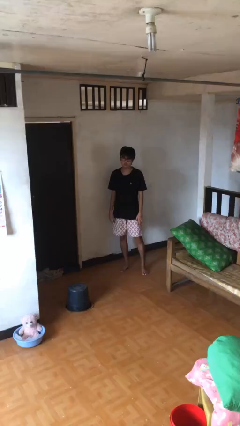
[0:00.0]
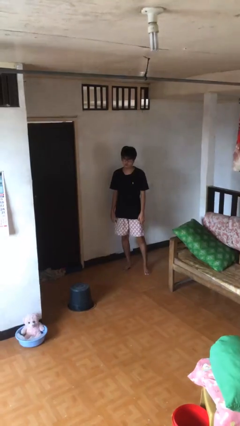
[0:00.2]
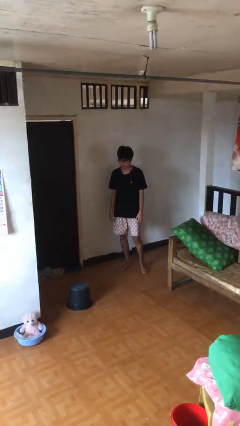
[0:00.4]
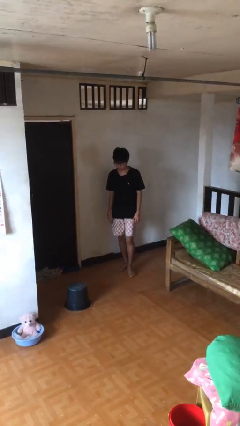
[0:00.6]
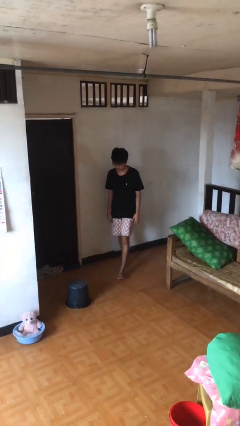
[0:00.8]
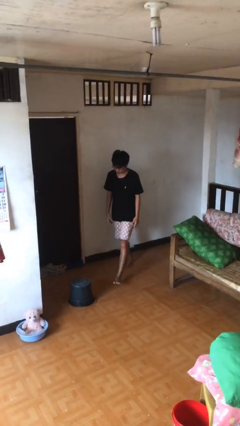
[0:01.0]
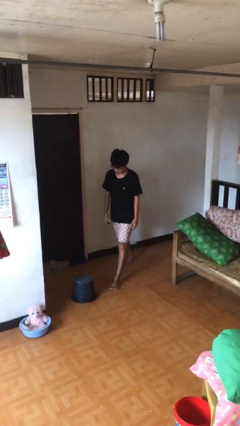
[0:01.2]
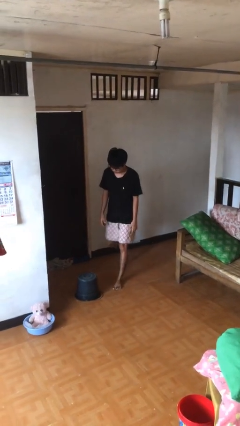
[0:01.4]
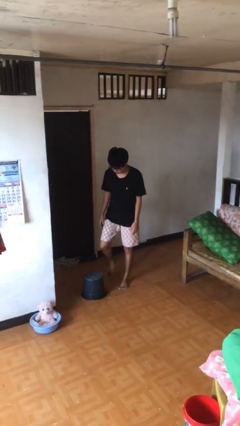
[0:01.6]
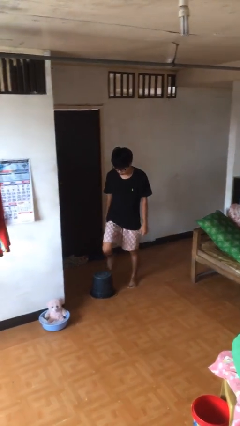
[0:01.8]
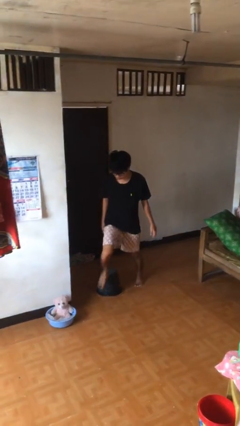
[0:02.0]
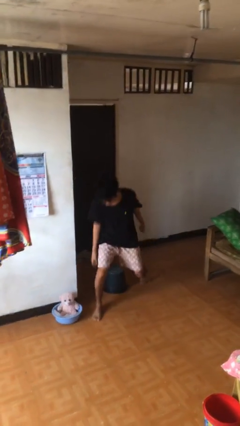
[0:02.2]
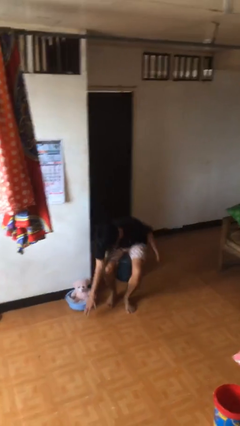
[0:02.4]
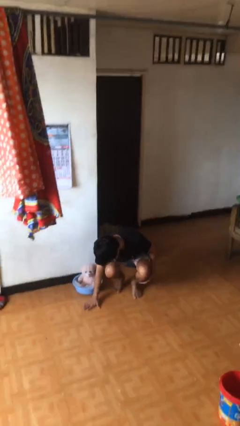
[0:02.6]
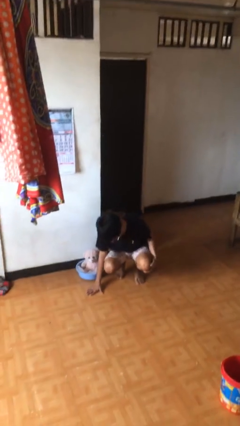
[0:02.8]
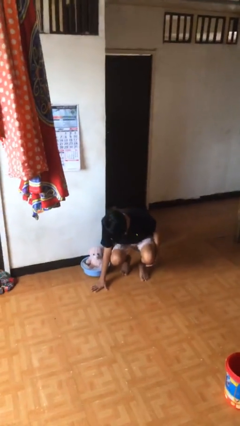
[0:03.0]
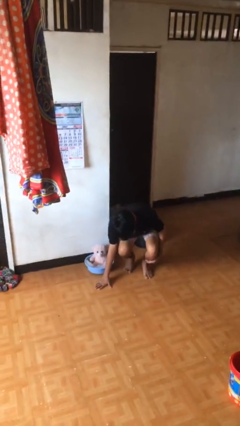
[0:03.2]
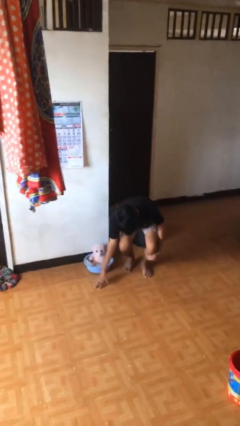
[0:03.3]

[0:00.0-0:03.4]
person trips on object on floor

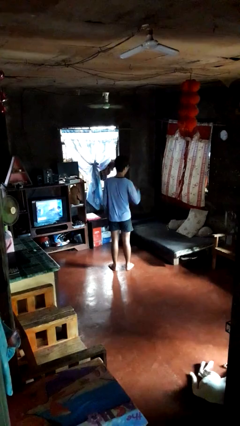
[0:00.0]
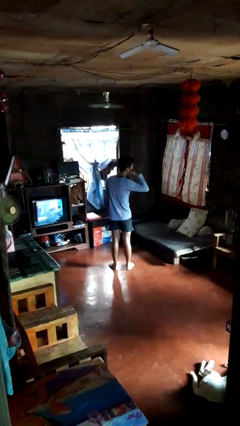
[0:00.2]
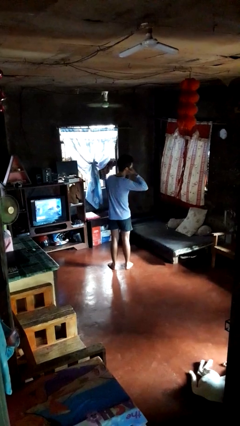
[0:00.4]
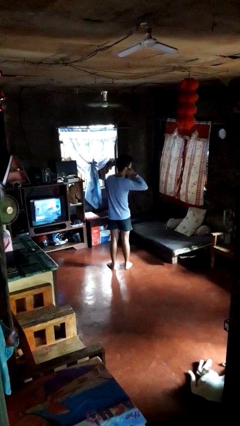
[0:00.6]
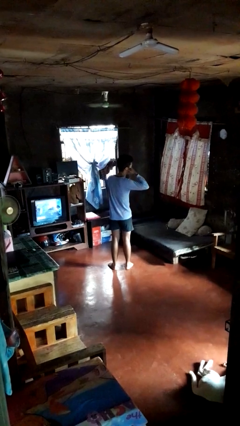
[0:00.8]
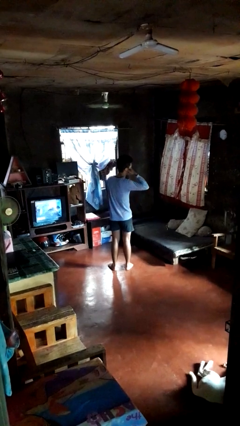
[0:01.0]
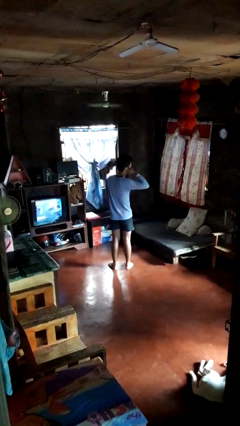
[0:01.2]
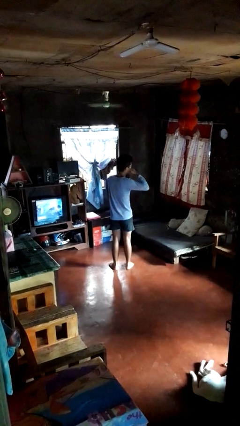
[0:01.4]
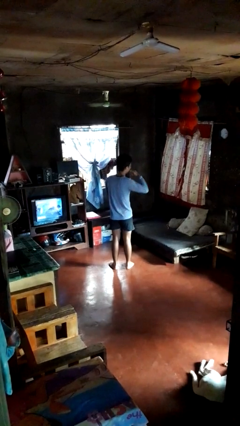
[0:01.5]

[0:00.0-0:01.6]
person gestures call me

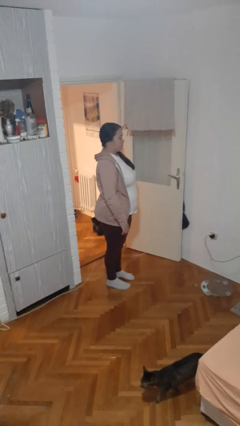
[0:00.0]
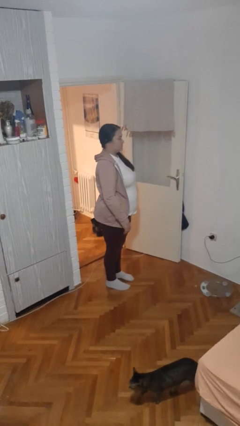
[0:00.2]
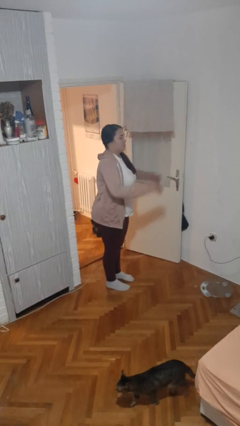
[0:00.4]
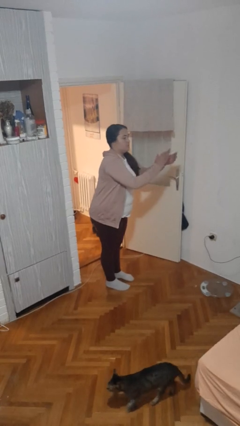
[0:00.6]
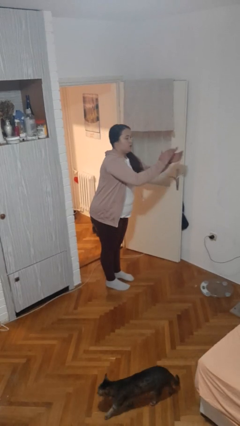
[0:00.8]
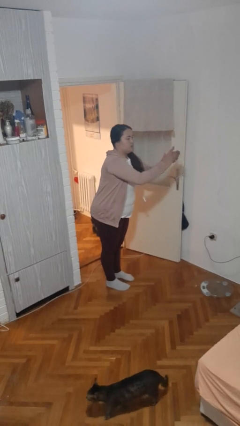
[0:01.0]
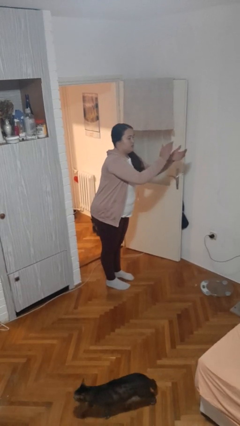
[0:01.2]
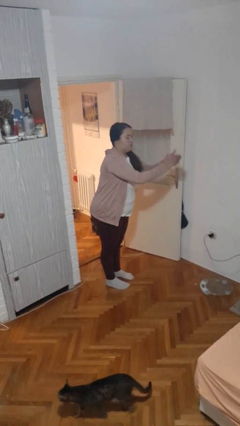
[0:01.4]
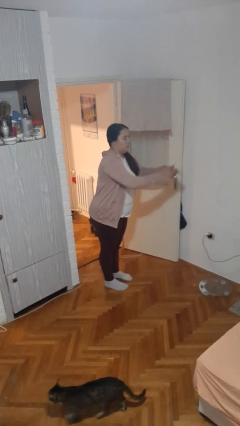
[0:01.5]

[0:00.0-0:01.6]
person claps hands

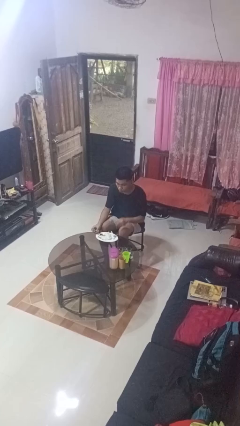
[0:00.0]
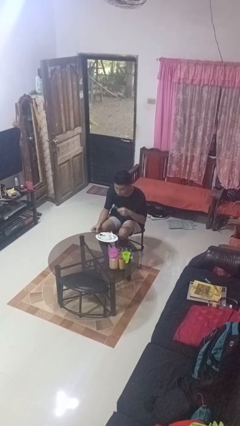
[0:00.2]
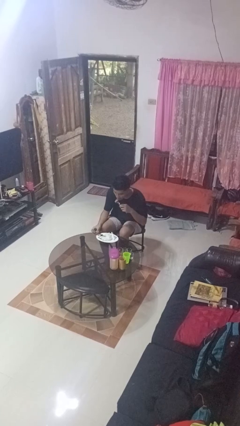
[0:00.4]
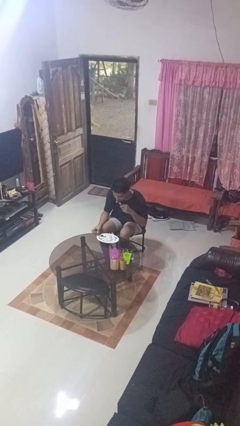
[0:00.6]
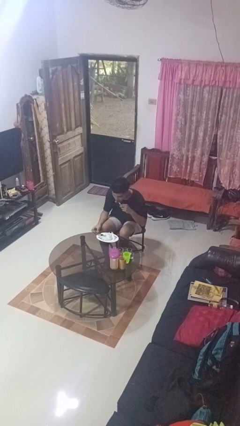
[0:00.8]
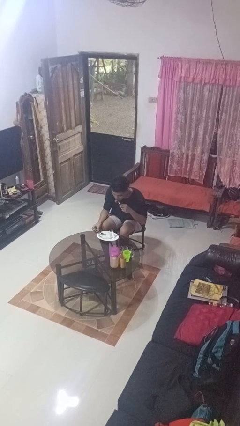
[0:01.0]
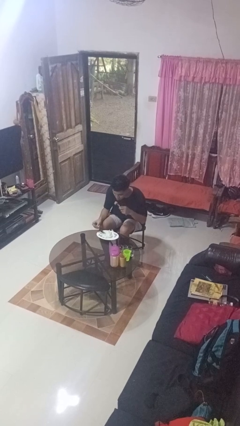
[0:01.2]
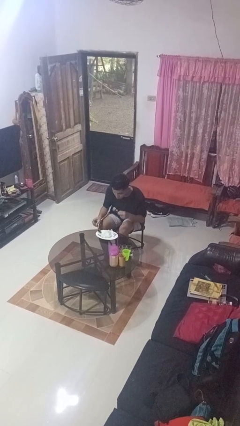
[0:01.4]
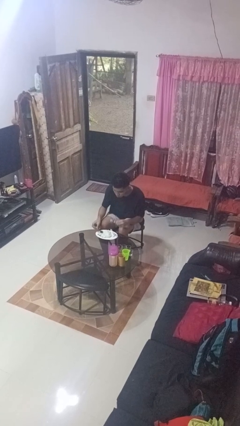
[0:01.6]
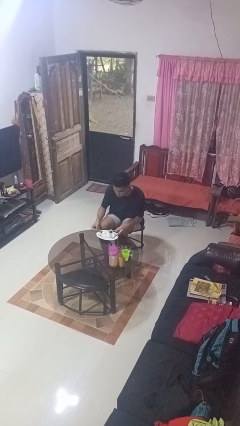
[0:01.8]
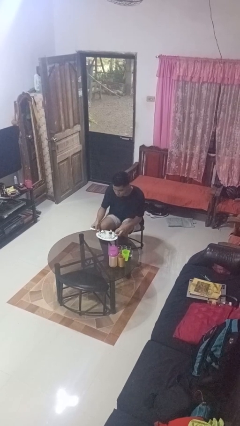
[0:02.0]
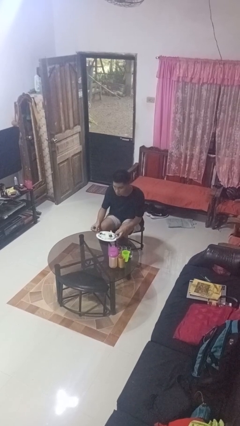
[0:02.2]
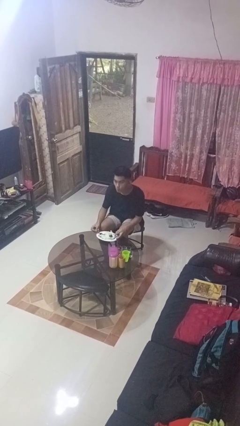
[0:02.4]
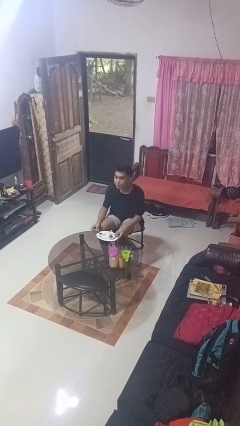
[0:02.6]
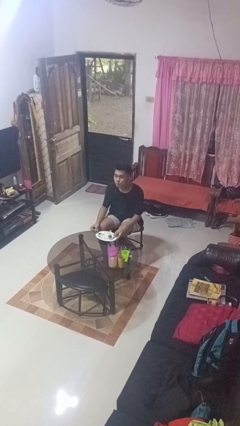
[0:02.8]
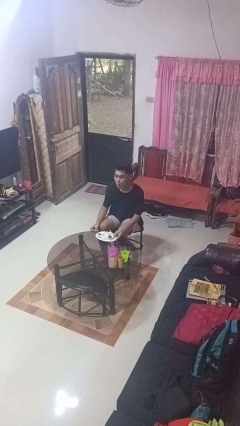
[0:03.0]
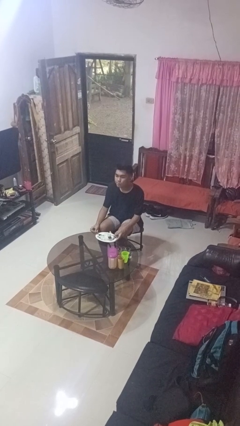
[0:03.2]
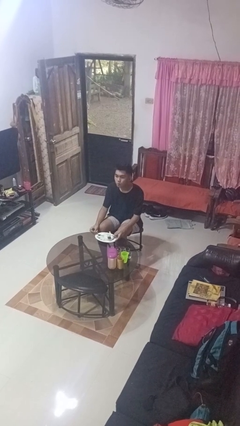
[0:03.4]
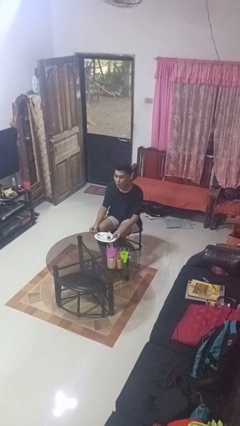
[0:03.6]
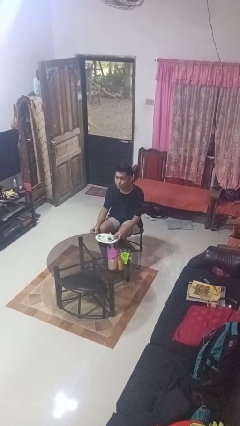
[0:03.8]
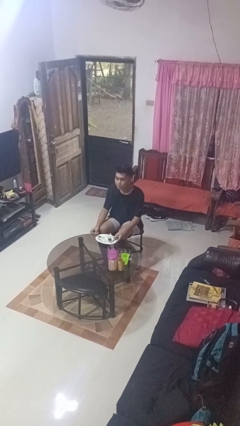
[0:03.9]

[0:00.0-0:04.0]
person eats with utensil

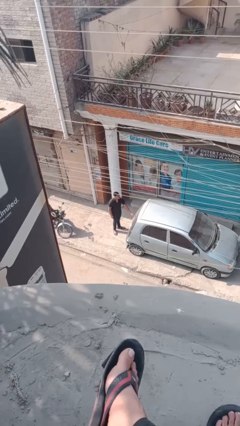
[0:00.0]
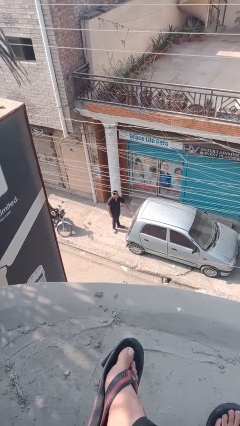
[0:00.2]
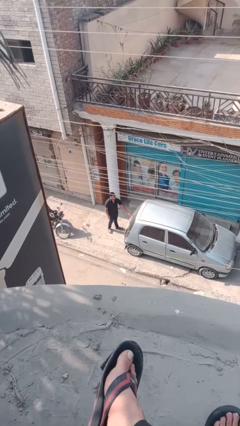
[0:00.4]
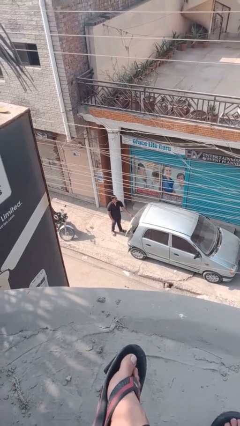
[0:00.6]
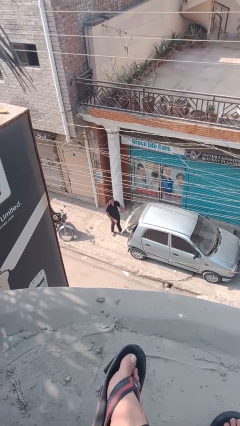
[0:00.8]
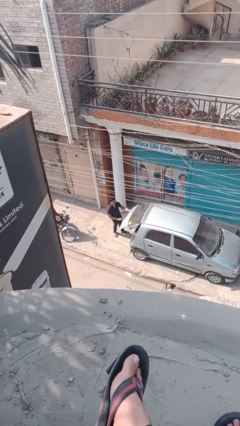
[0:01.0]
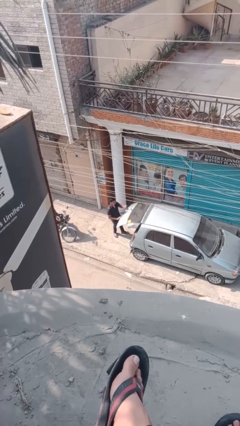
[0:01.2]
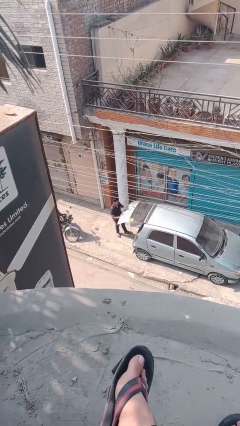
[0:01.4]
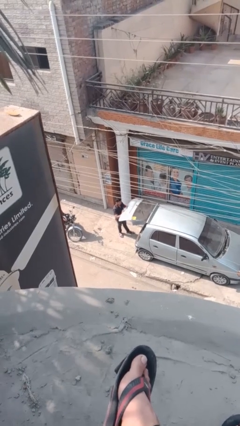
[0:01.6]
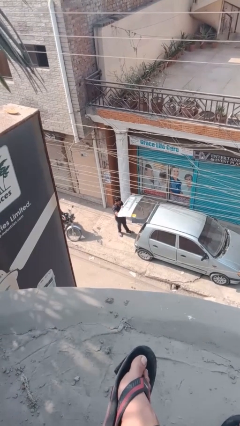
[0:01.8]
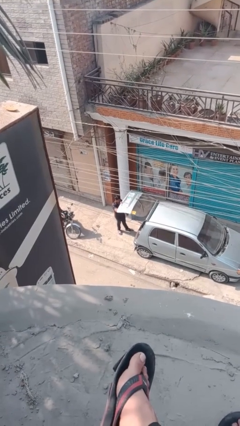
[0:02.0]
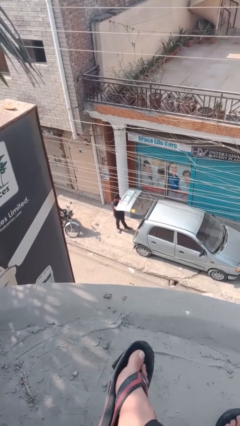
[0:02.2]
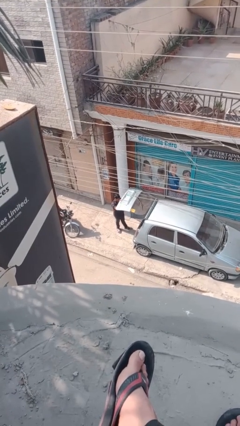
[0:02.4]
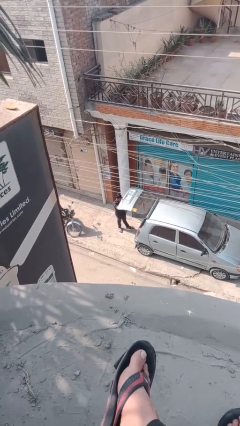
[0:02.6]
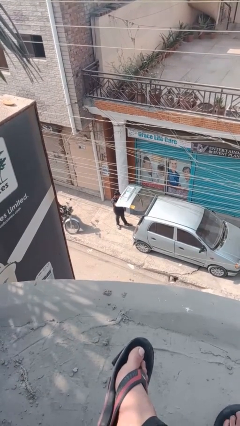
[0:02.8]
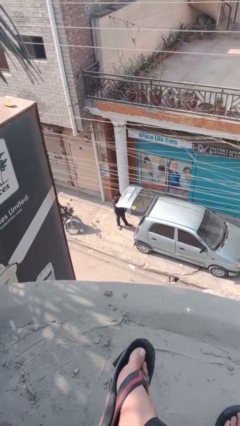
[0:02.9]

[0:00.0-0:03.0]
person opens car trunk

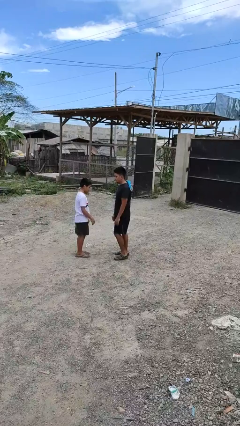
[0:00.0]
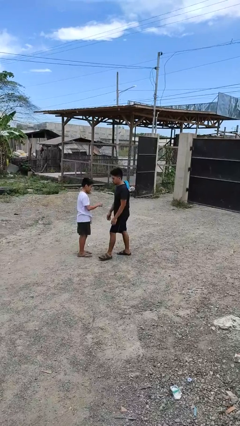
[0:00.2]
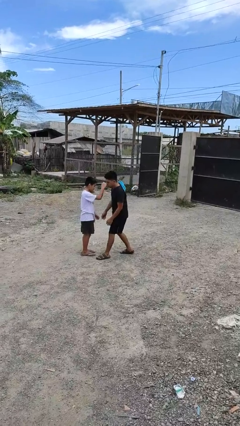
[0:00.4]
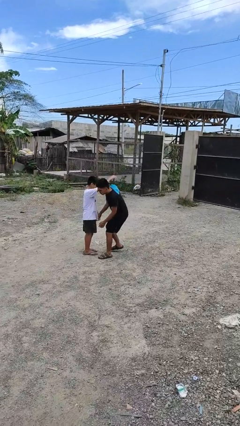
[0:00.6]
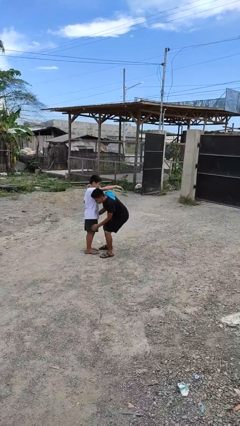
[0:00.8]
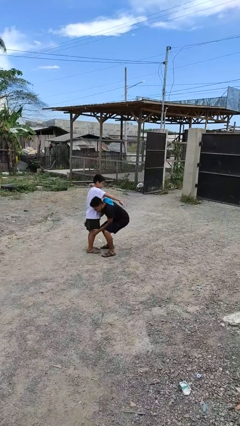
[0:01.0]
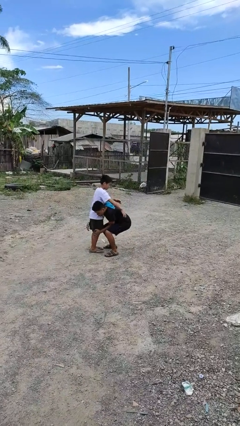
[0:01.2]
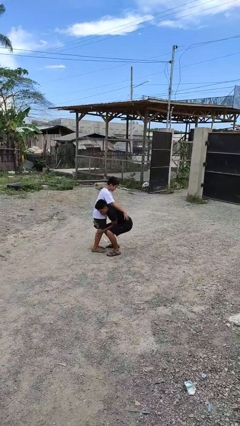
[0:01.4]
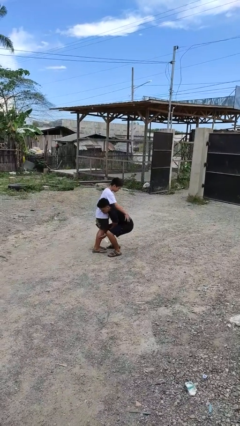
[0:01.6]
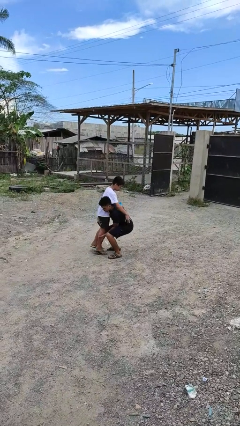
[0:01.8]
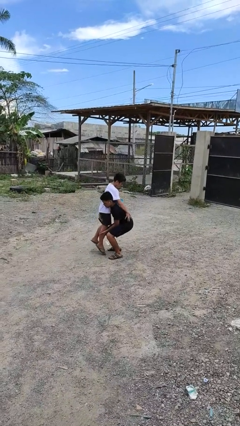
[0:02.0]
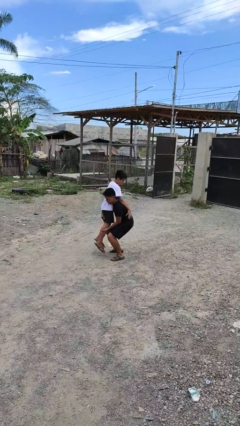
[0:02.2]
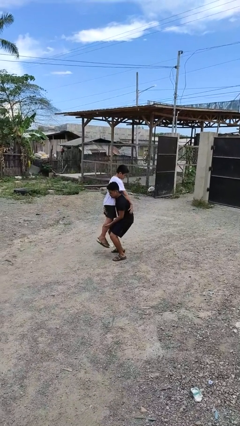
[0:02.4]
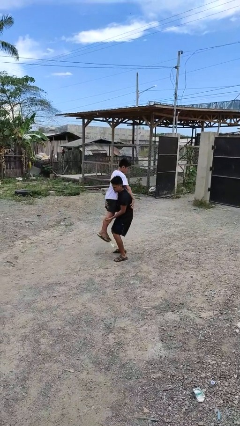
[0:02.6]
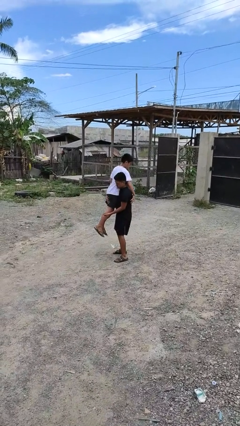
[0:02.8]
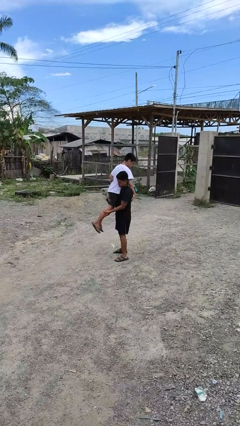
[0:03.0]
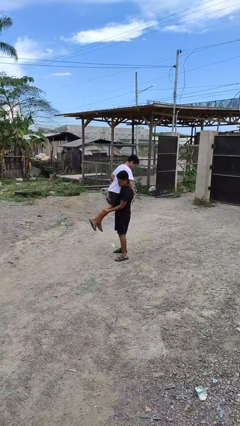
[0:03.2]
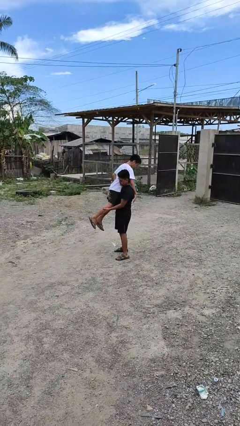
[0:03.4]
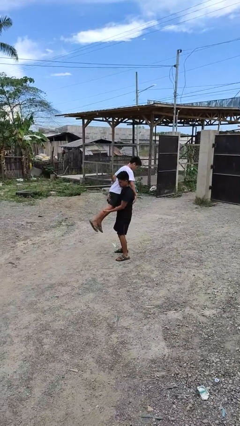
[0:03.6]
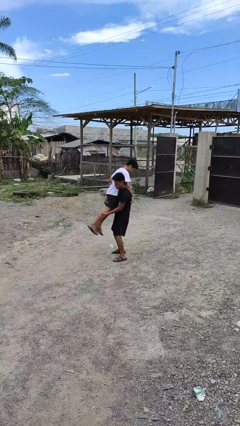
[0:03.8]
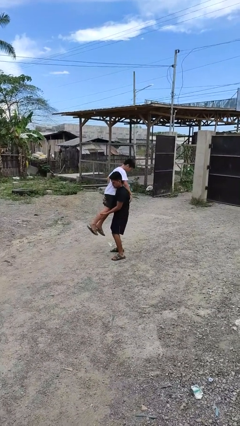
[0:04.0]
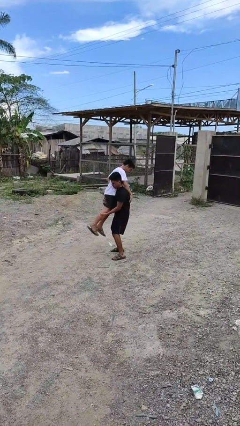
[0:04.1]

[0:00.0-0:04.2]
person carries person over shoulder
